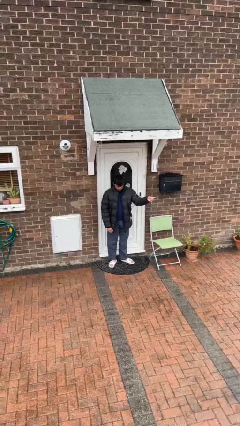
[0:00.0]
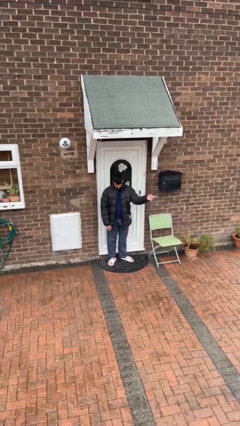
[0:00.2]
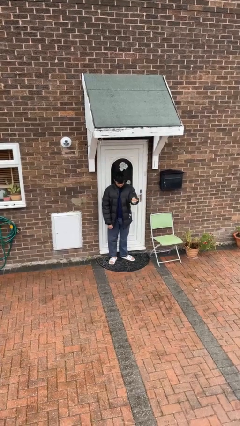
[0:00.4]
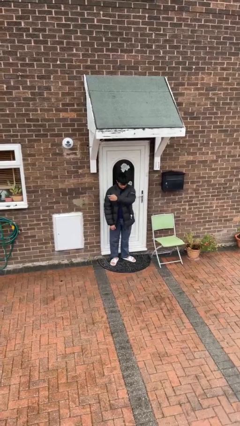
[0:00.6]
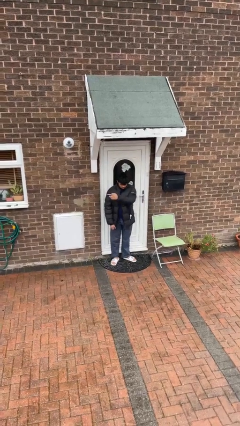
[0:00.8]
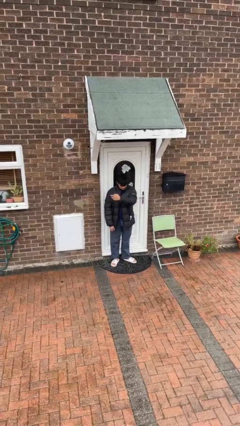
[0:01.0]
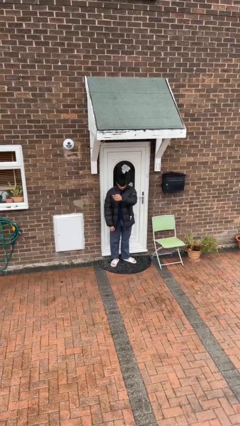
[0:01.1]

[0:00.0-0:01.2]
person gestures swipe right

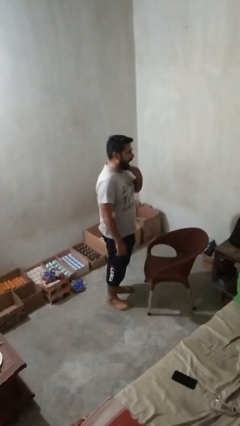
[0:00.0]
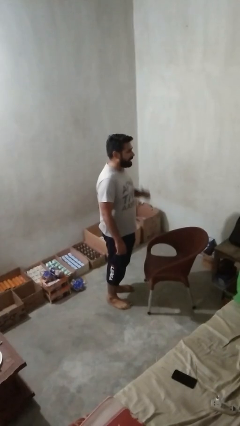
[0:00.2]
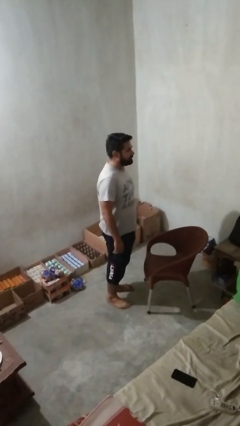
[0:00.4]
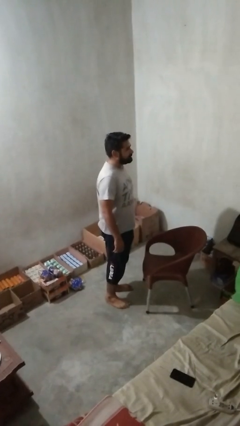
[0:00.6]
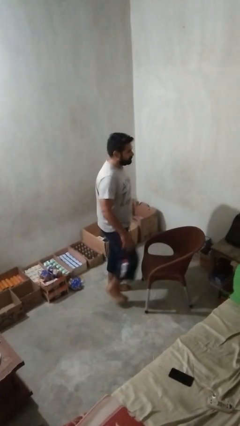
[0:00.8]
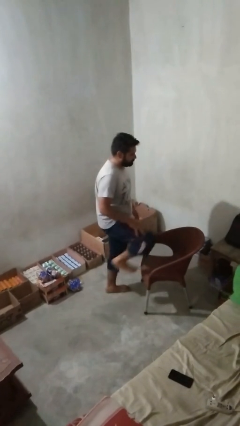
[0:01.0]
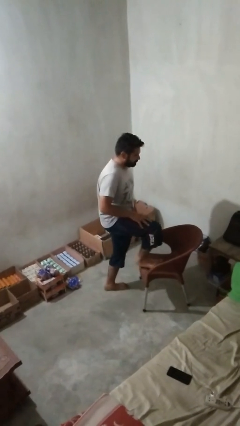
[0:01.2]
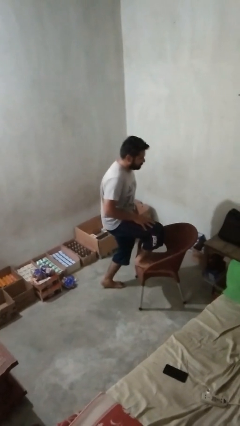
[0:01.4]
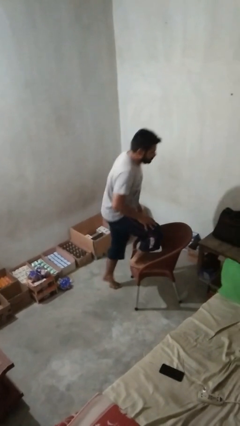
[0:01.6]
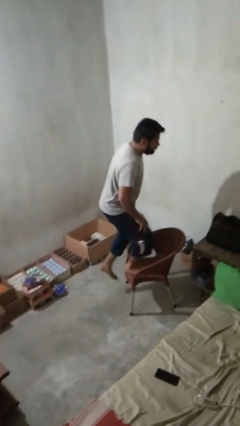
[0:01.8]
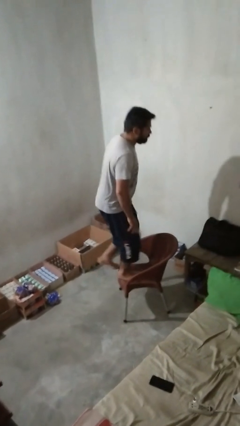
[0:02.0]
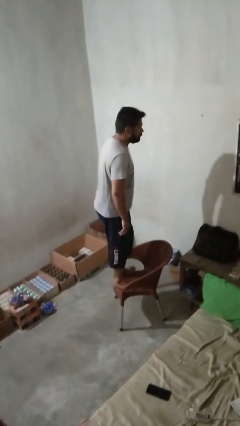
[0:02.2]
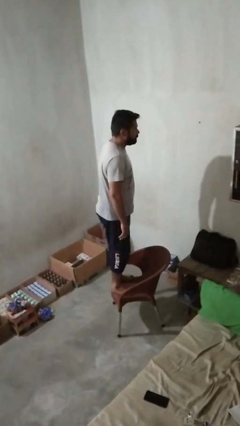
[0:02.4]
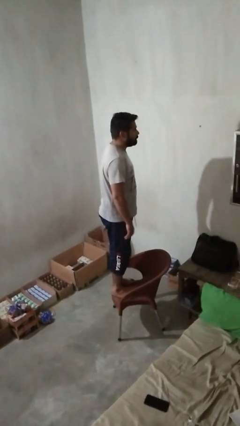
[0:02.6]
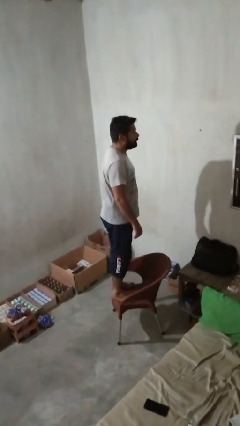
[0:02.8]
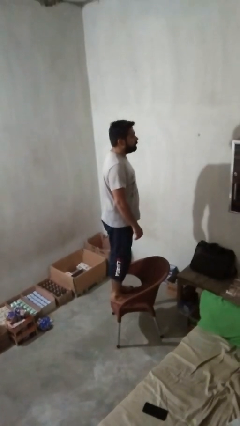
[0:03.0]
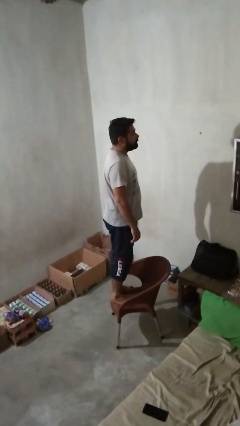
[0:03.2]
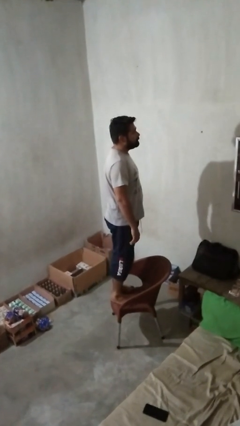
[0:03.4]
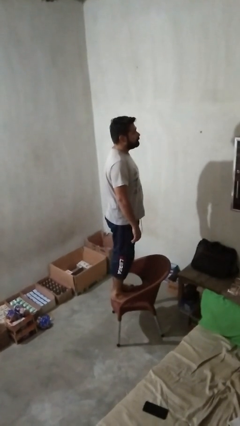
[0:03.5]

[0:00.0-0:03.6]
person climbs on chair

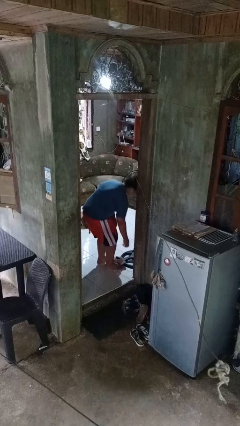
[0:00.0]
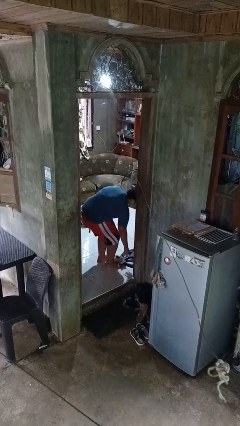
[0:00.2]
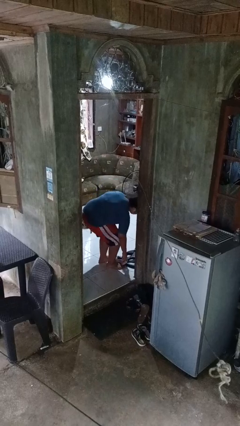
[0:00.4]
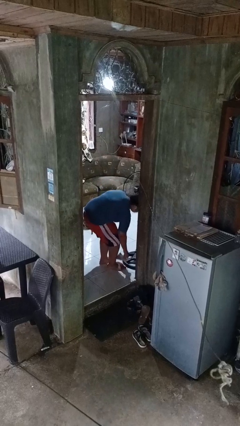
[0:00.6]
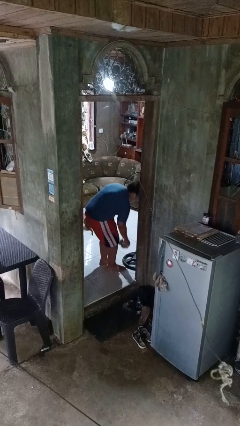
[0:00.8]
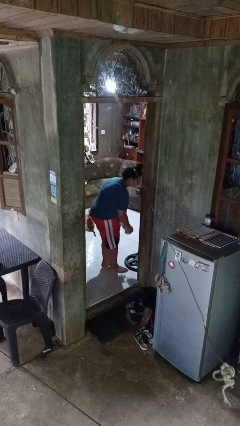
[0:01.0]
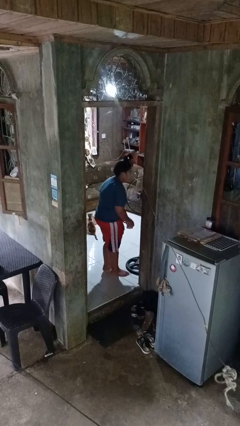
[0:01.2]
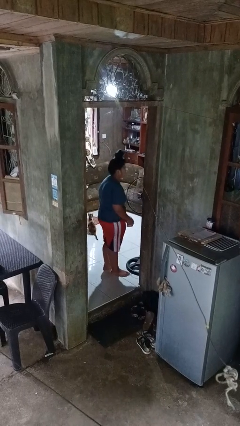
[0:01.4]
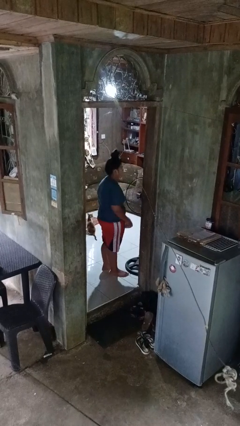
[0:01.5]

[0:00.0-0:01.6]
person picks up object from floor

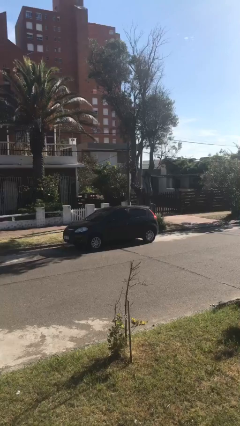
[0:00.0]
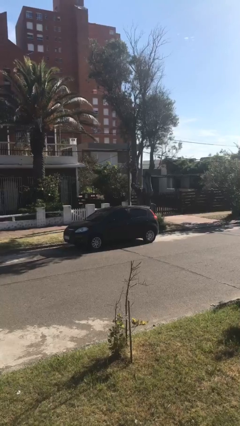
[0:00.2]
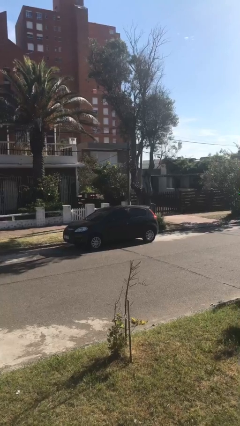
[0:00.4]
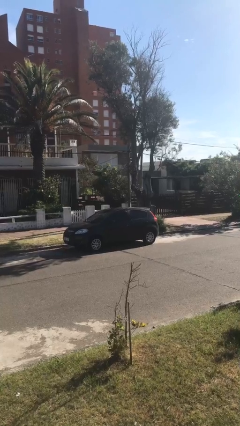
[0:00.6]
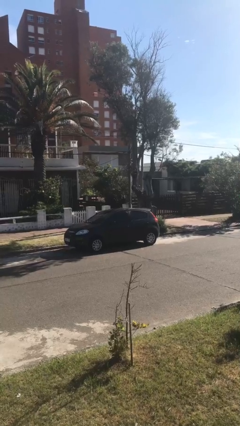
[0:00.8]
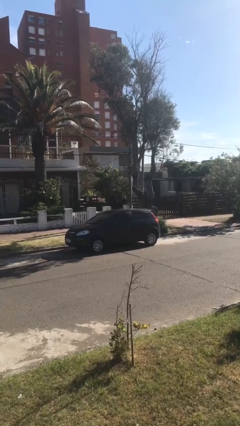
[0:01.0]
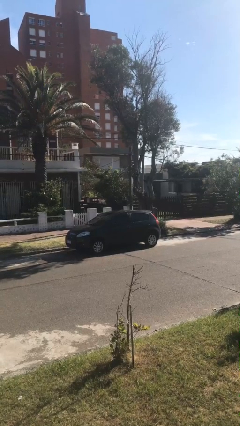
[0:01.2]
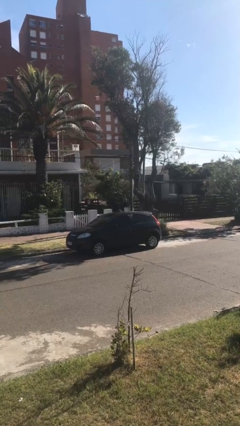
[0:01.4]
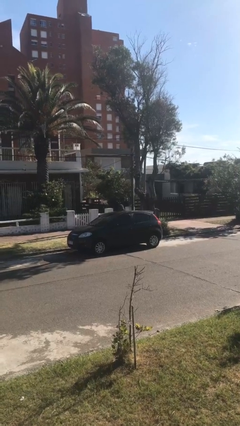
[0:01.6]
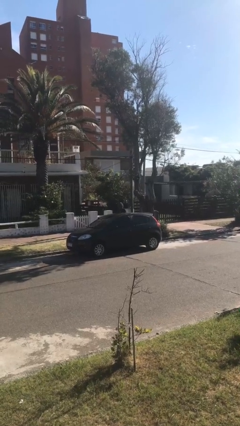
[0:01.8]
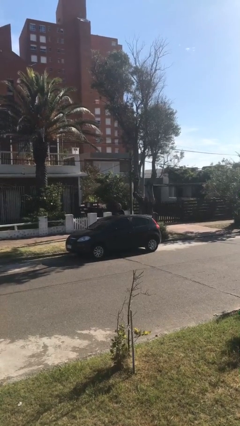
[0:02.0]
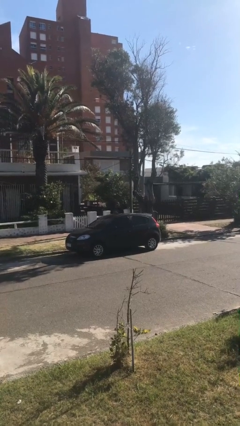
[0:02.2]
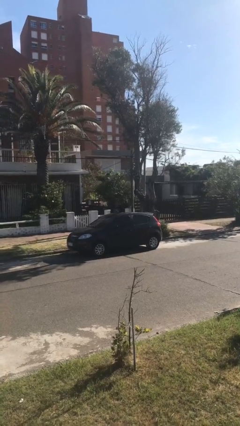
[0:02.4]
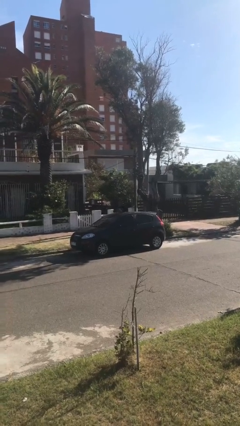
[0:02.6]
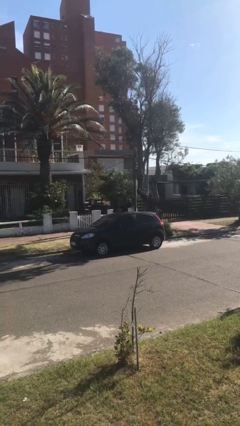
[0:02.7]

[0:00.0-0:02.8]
person exits car

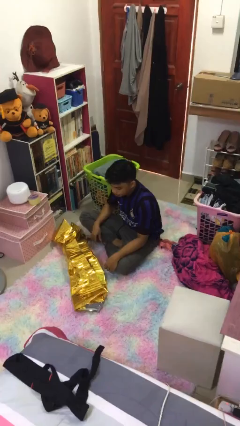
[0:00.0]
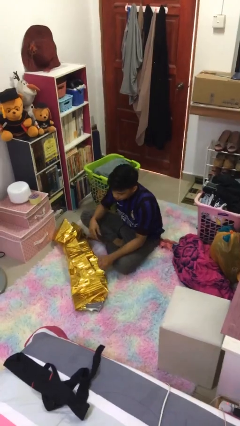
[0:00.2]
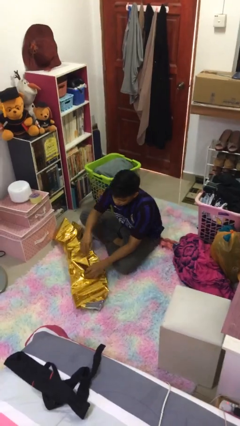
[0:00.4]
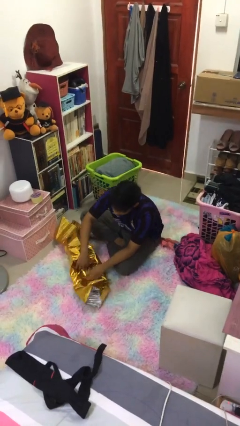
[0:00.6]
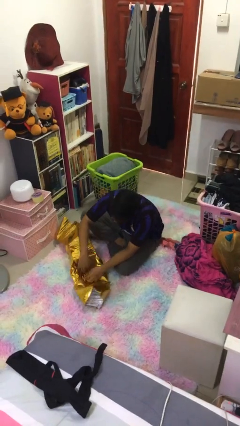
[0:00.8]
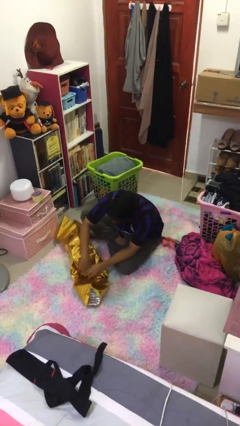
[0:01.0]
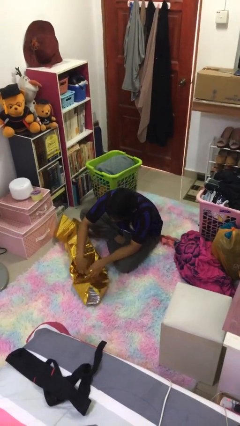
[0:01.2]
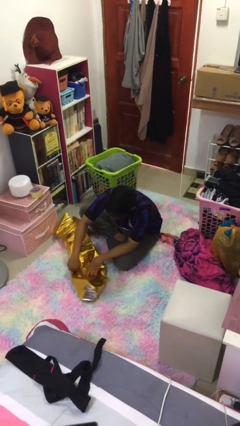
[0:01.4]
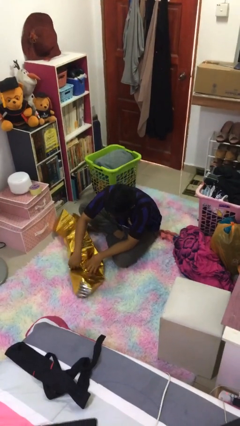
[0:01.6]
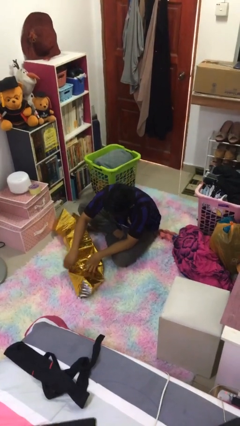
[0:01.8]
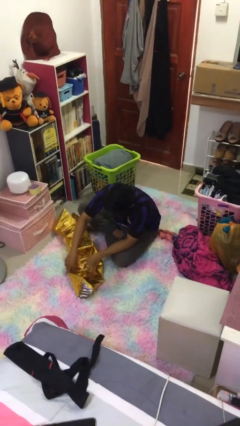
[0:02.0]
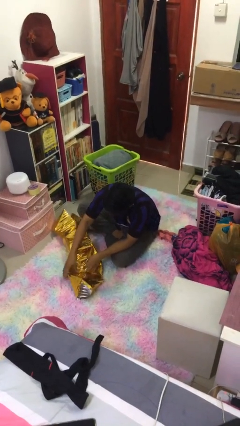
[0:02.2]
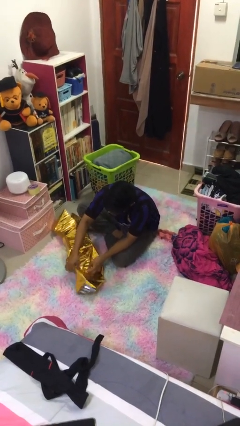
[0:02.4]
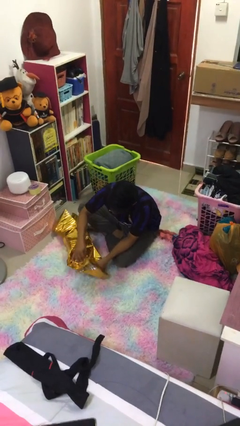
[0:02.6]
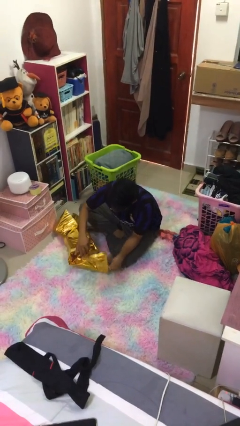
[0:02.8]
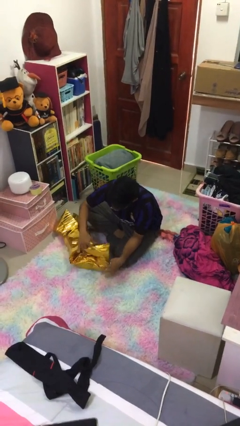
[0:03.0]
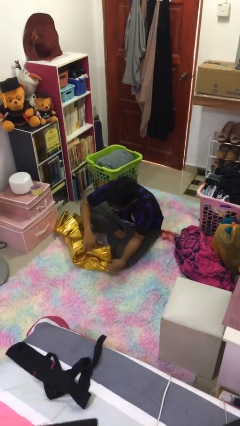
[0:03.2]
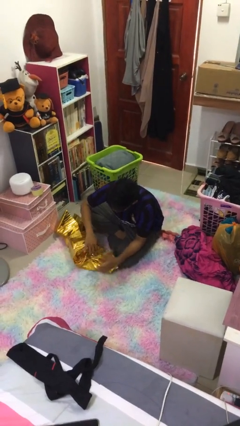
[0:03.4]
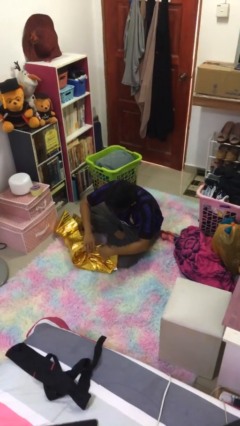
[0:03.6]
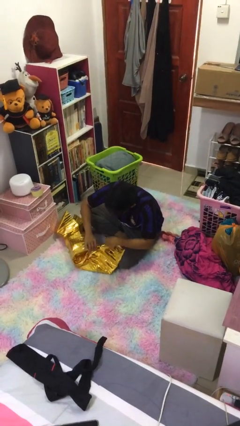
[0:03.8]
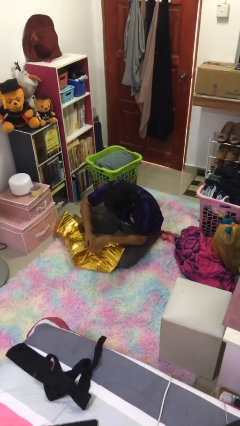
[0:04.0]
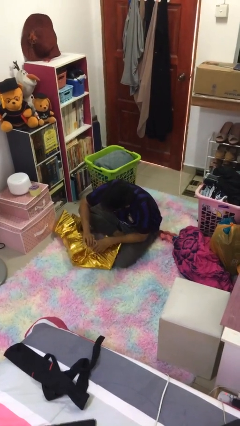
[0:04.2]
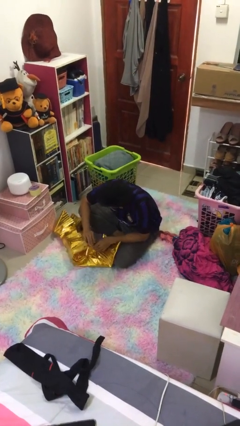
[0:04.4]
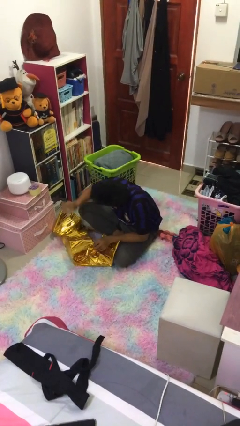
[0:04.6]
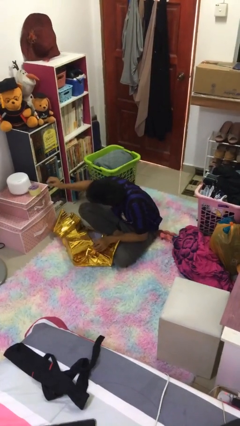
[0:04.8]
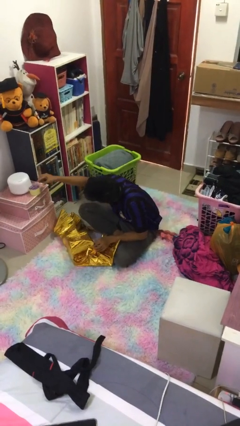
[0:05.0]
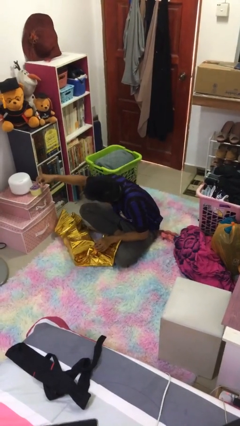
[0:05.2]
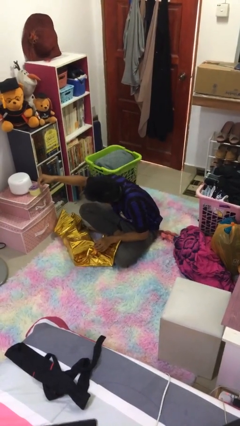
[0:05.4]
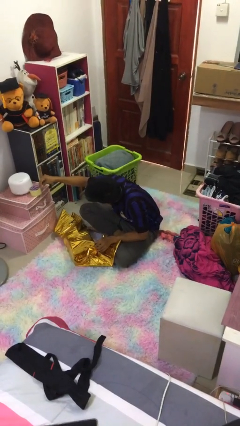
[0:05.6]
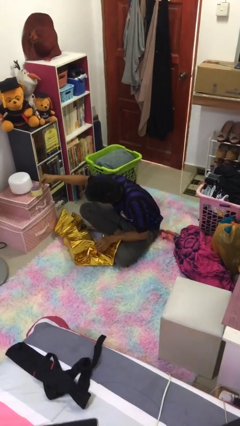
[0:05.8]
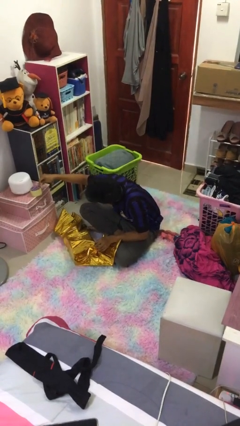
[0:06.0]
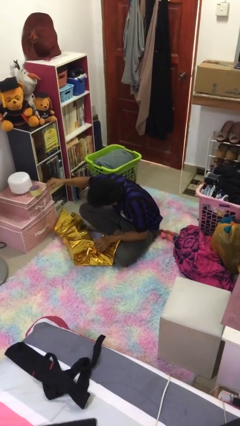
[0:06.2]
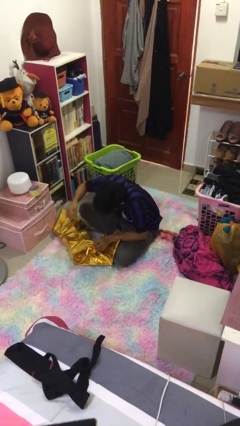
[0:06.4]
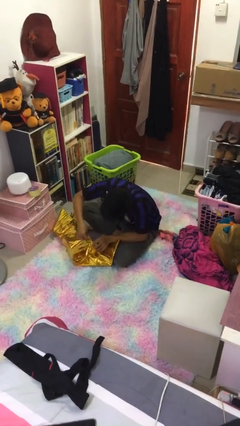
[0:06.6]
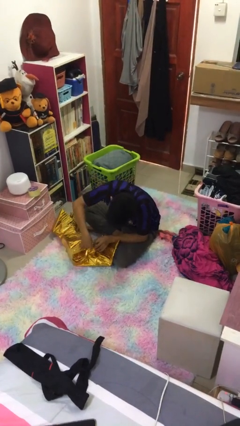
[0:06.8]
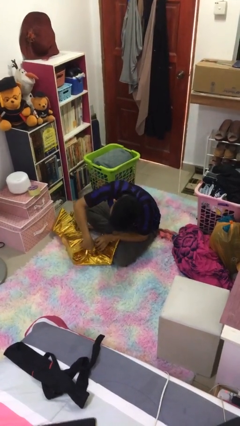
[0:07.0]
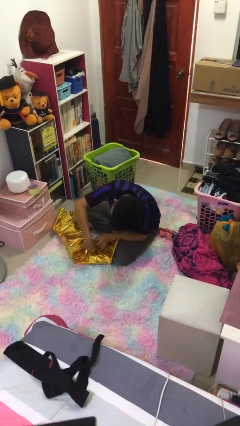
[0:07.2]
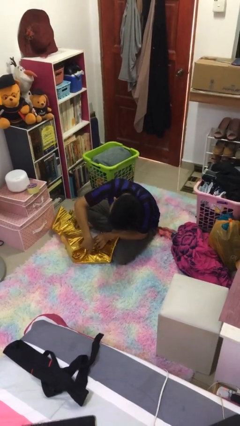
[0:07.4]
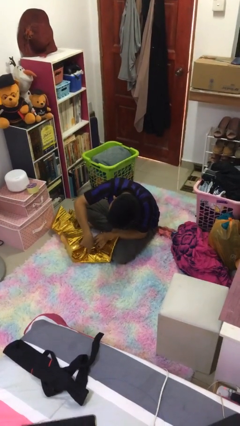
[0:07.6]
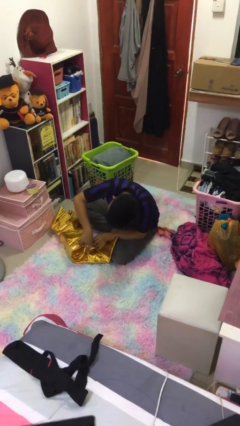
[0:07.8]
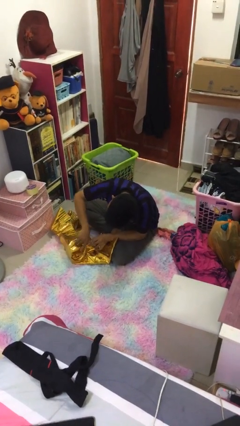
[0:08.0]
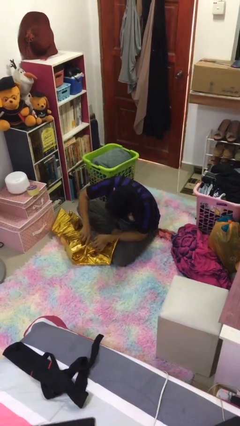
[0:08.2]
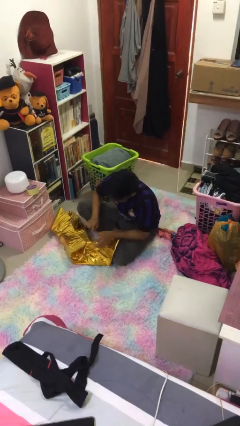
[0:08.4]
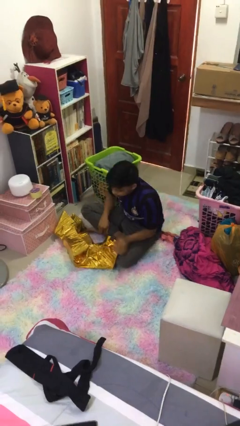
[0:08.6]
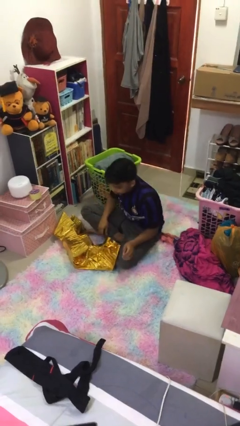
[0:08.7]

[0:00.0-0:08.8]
person wraps box
